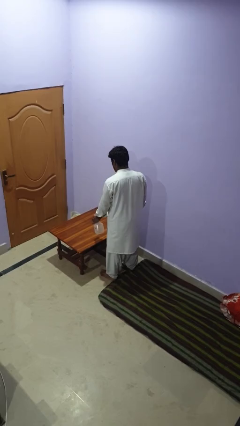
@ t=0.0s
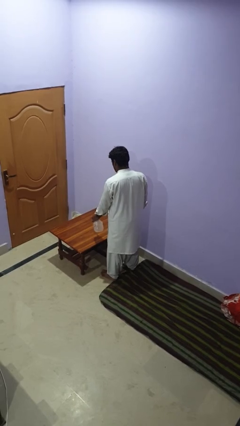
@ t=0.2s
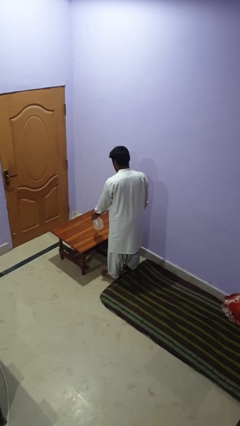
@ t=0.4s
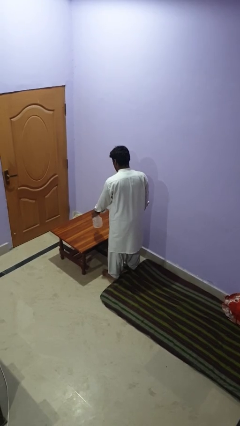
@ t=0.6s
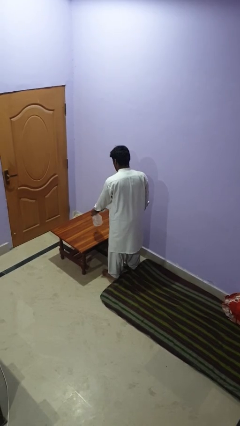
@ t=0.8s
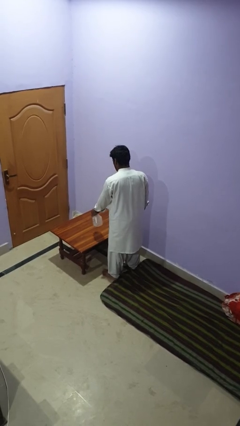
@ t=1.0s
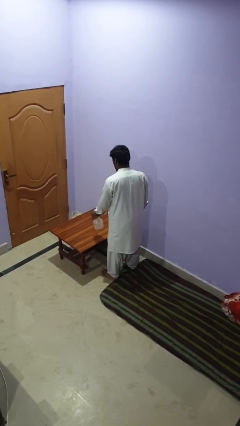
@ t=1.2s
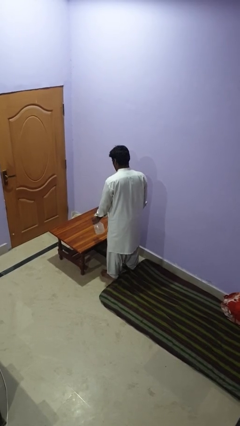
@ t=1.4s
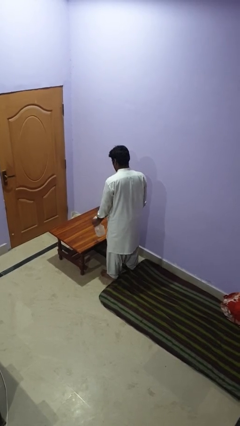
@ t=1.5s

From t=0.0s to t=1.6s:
person sprays from bottle

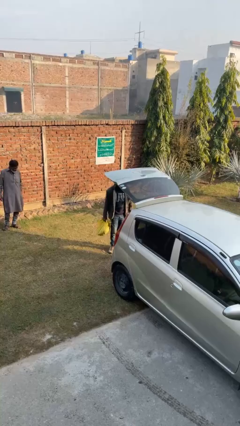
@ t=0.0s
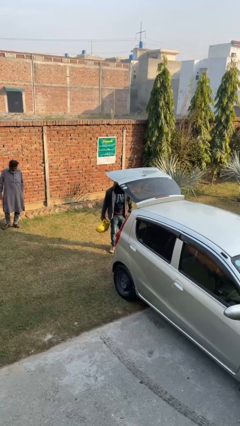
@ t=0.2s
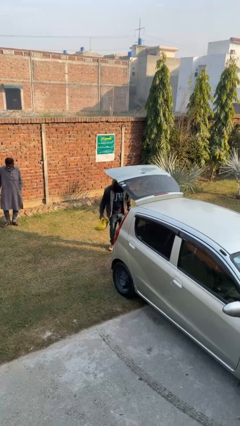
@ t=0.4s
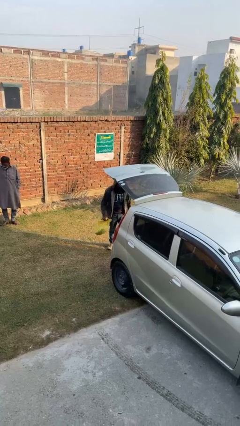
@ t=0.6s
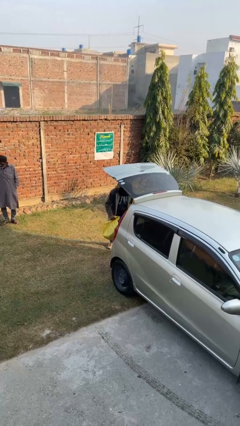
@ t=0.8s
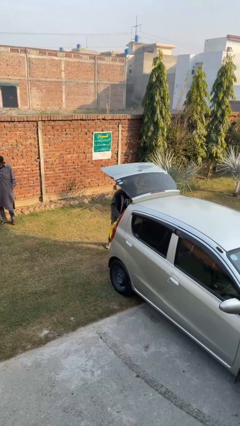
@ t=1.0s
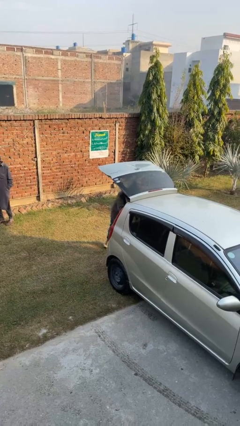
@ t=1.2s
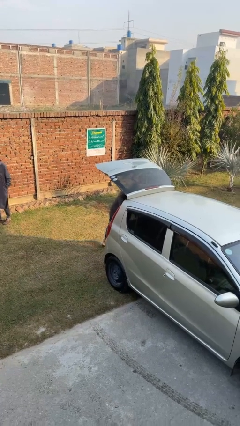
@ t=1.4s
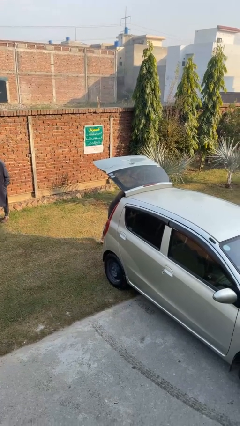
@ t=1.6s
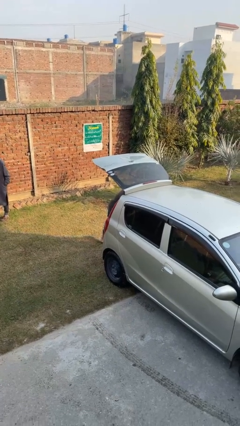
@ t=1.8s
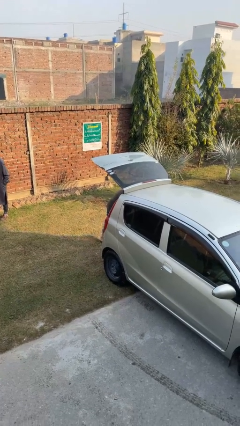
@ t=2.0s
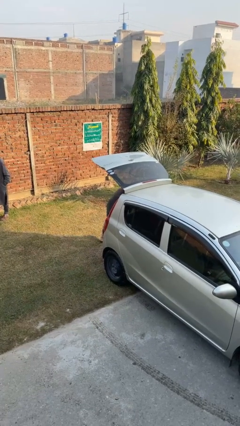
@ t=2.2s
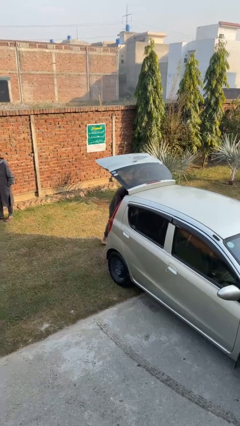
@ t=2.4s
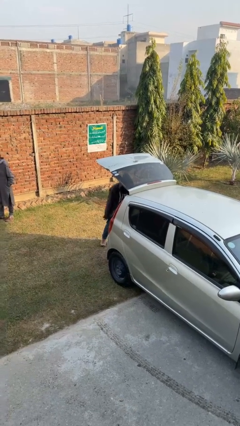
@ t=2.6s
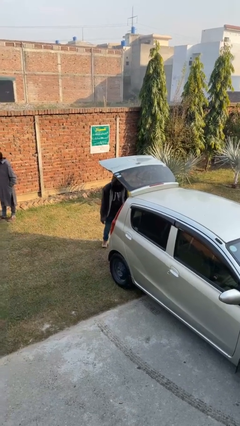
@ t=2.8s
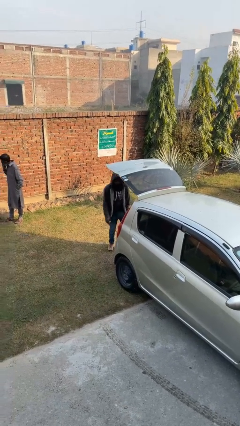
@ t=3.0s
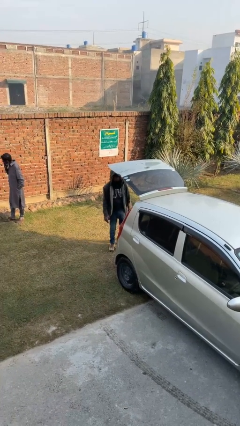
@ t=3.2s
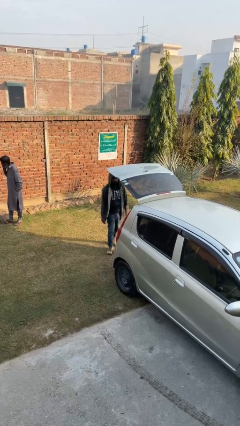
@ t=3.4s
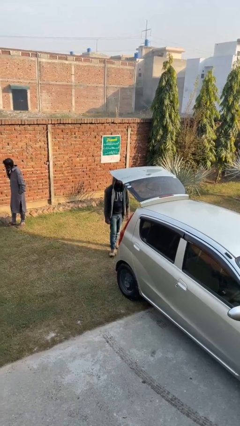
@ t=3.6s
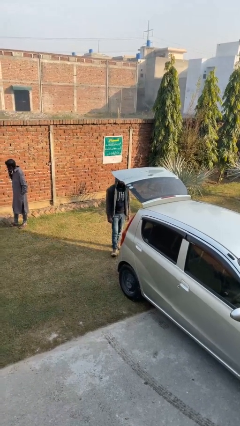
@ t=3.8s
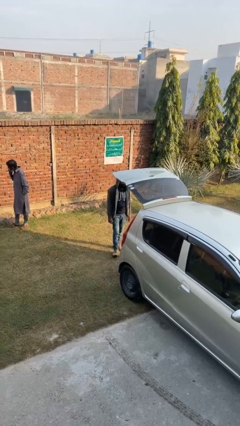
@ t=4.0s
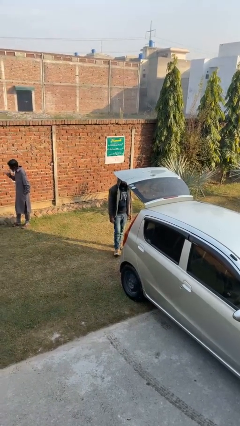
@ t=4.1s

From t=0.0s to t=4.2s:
person loads car

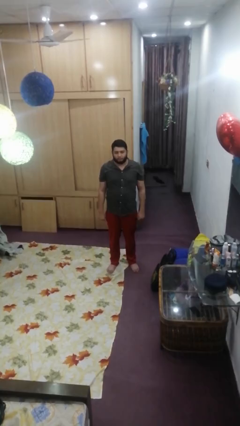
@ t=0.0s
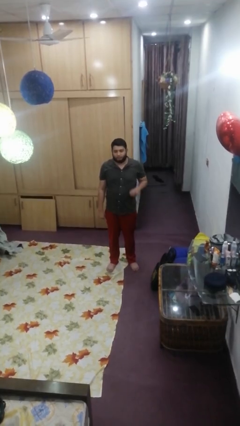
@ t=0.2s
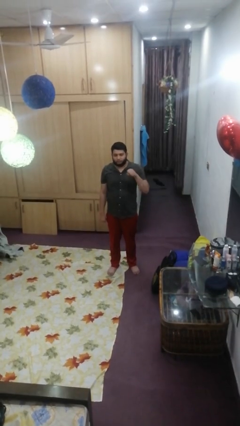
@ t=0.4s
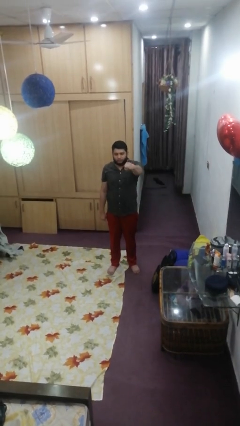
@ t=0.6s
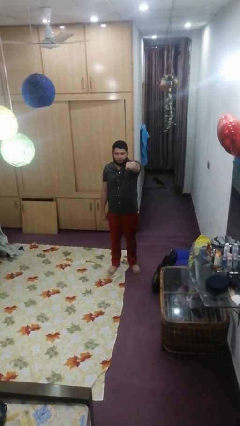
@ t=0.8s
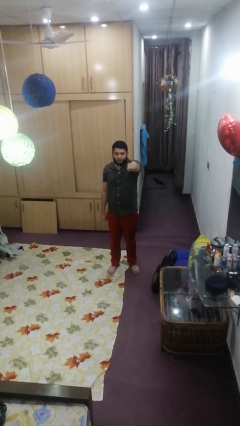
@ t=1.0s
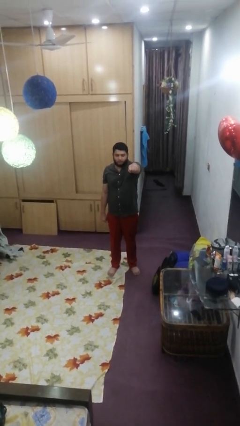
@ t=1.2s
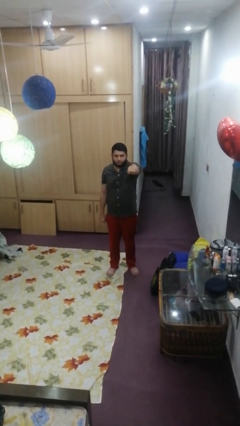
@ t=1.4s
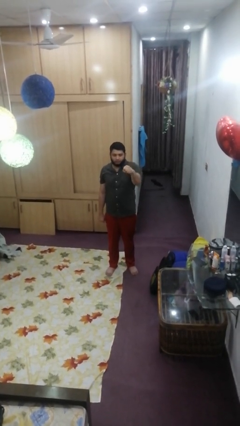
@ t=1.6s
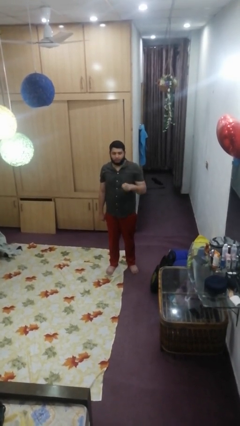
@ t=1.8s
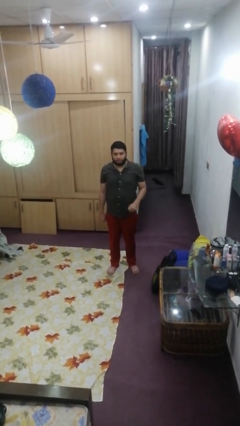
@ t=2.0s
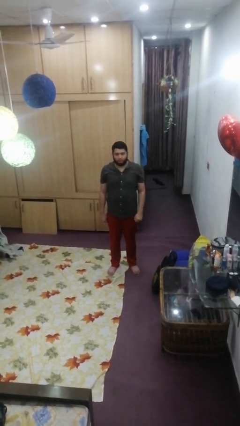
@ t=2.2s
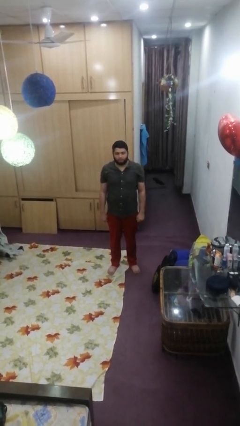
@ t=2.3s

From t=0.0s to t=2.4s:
person punches

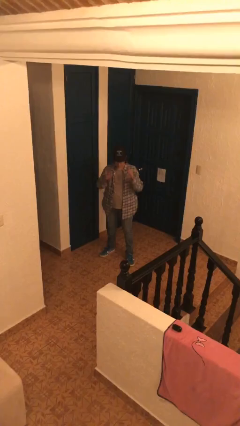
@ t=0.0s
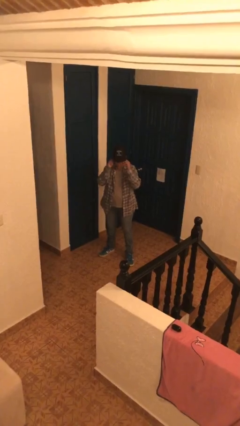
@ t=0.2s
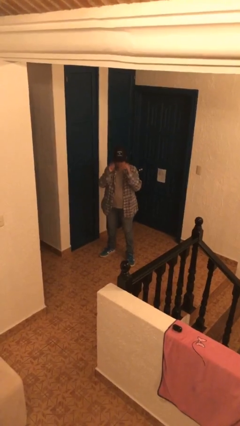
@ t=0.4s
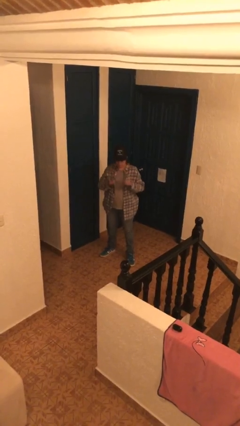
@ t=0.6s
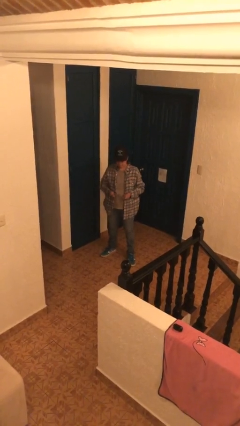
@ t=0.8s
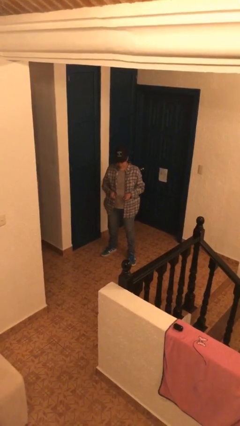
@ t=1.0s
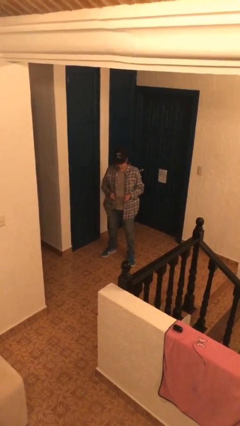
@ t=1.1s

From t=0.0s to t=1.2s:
person takes off glasses

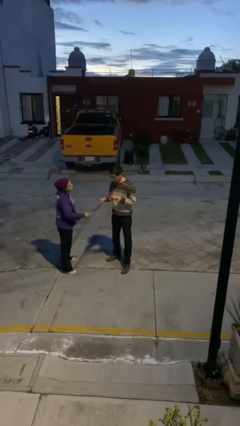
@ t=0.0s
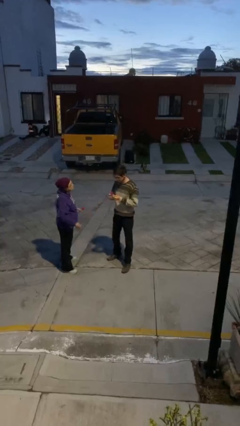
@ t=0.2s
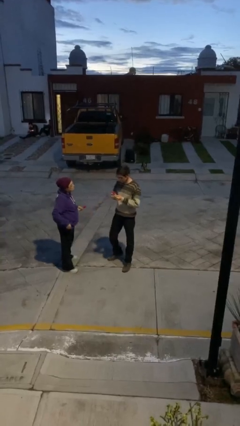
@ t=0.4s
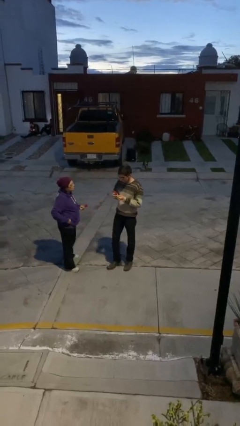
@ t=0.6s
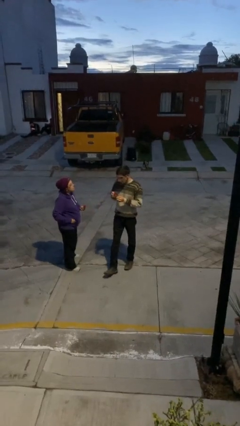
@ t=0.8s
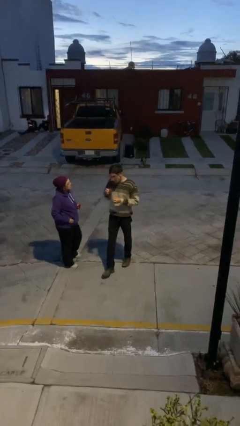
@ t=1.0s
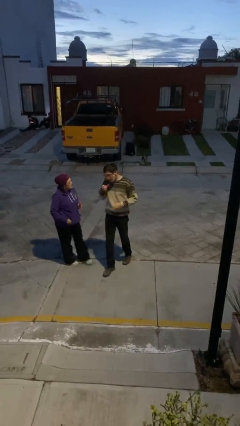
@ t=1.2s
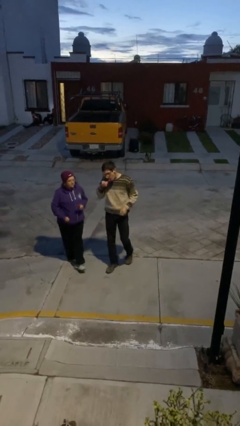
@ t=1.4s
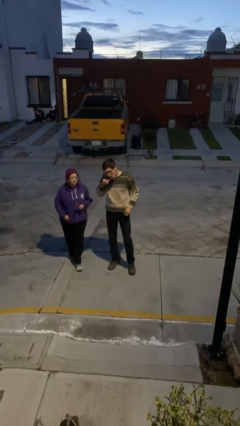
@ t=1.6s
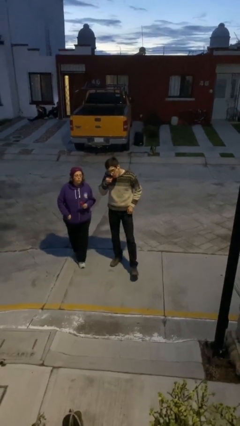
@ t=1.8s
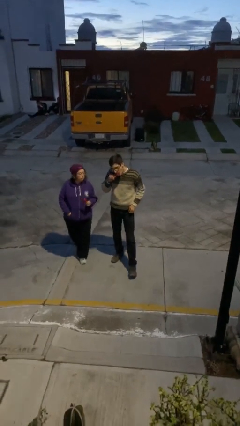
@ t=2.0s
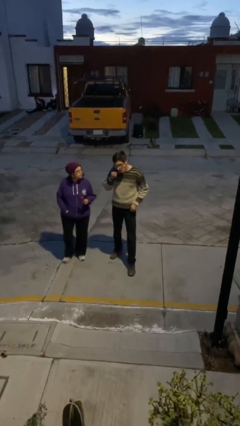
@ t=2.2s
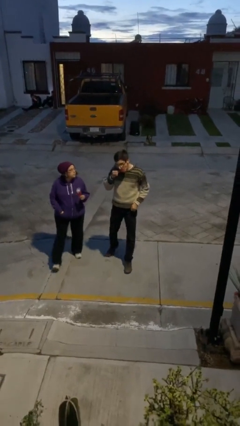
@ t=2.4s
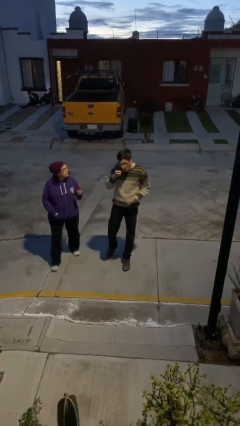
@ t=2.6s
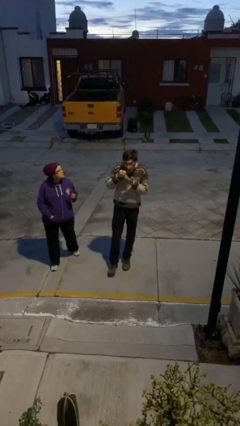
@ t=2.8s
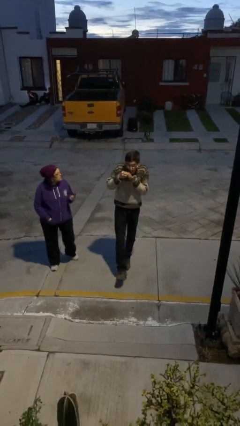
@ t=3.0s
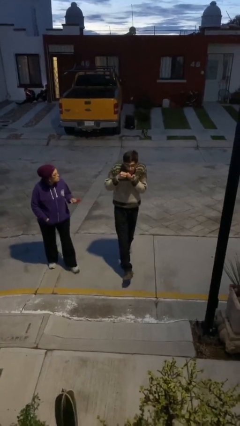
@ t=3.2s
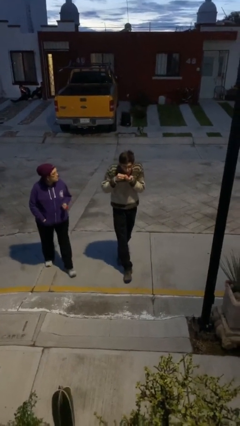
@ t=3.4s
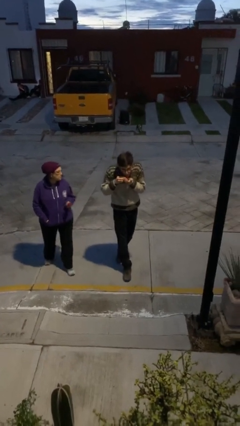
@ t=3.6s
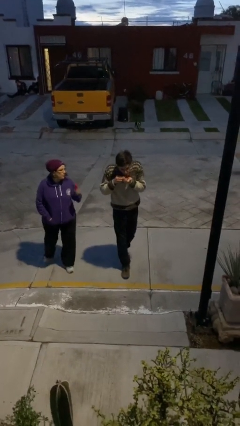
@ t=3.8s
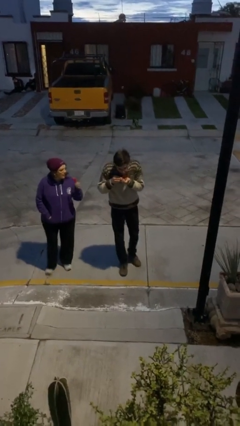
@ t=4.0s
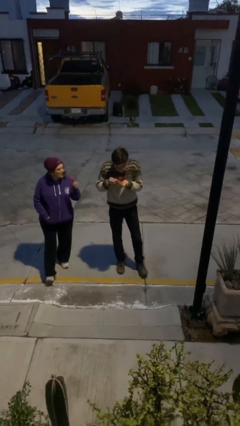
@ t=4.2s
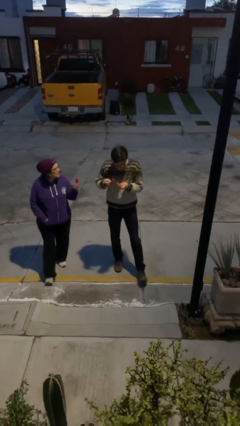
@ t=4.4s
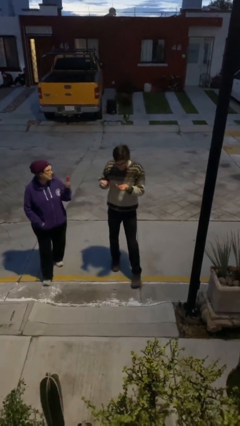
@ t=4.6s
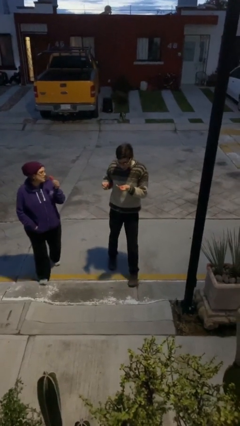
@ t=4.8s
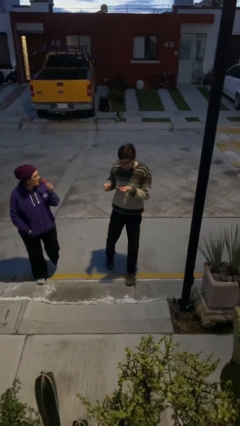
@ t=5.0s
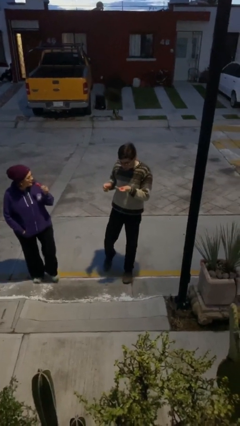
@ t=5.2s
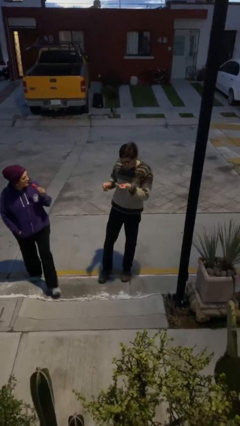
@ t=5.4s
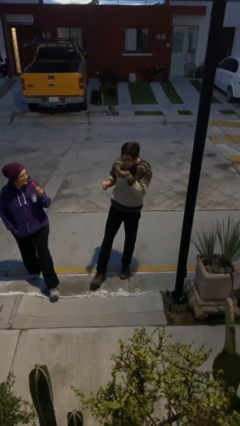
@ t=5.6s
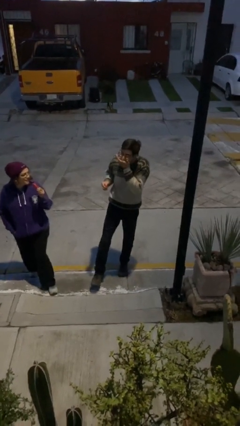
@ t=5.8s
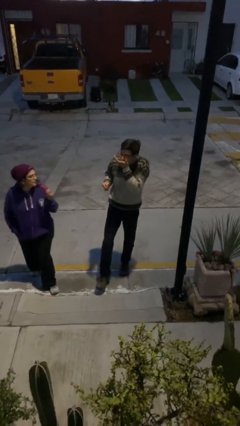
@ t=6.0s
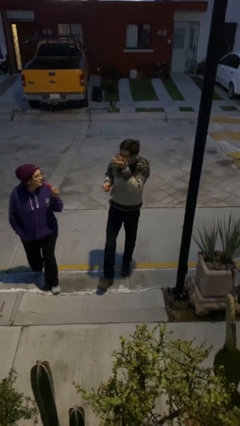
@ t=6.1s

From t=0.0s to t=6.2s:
person talks to person

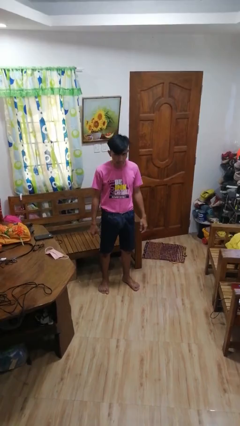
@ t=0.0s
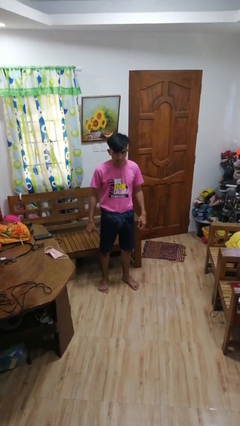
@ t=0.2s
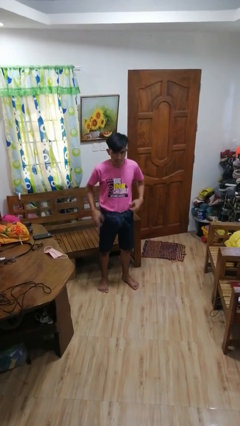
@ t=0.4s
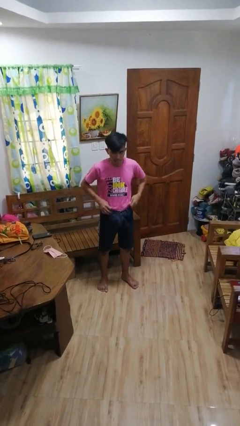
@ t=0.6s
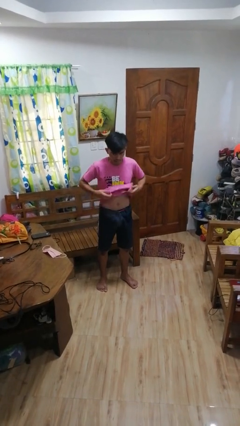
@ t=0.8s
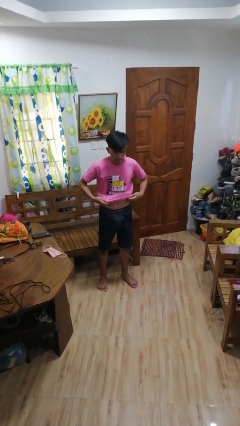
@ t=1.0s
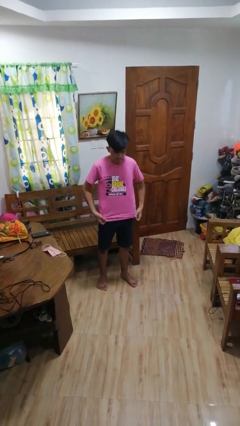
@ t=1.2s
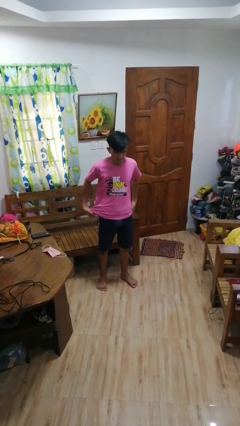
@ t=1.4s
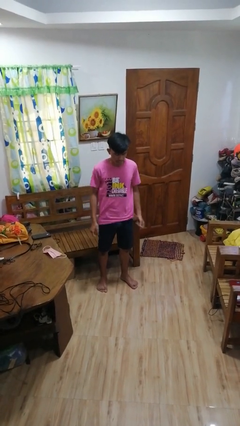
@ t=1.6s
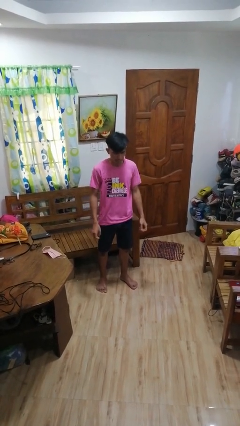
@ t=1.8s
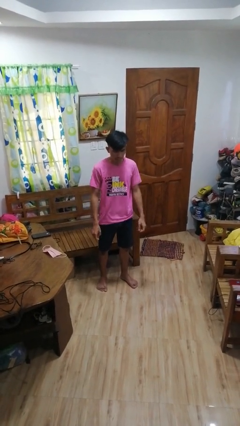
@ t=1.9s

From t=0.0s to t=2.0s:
person untucks shirt

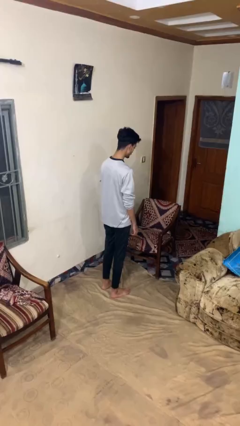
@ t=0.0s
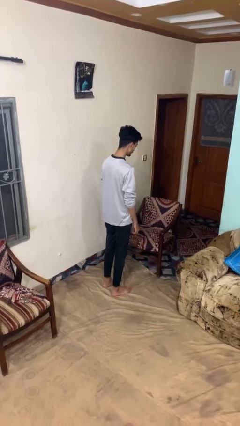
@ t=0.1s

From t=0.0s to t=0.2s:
person climbs off chair
